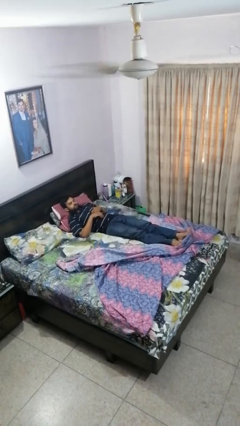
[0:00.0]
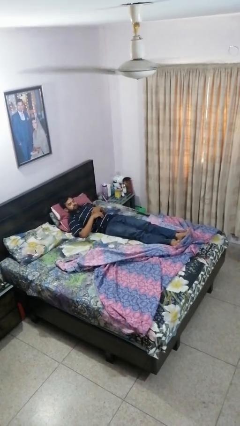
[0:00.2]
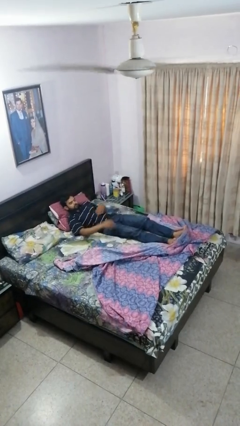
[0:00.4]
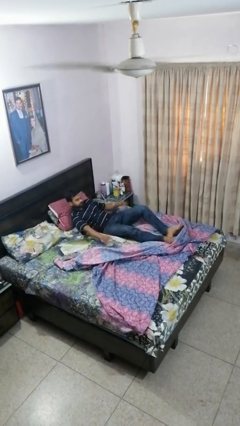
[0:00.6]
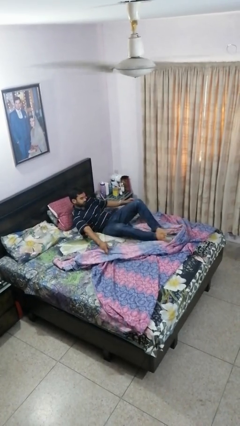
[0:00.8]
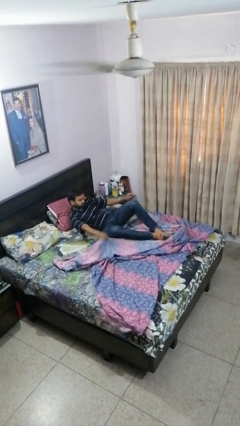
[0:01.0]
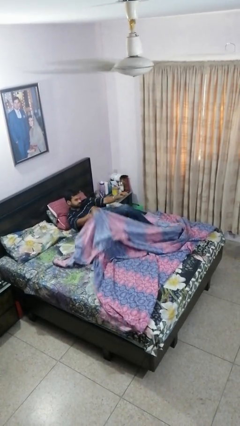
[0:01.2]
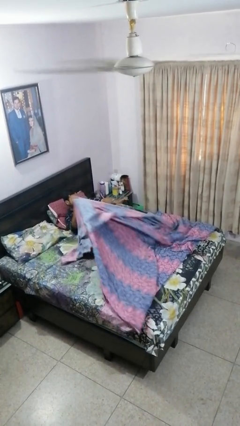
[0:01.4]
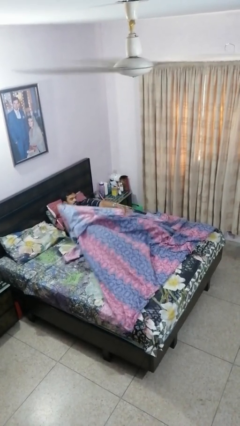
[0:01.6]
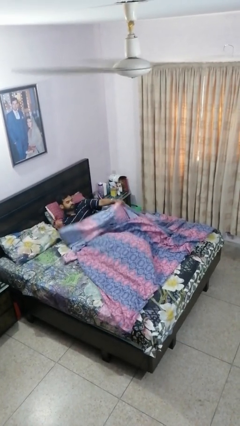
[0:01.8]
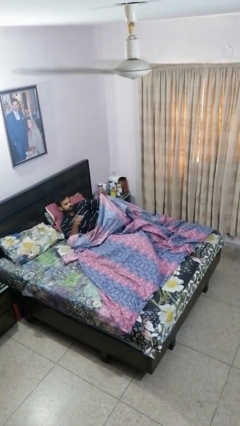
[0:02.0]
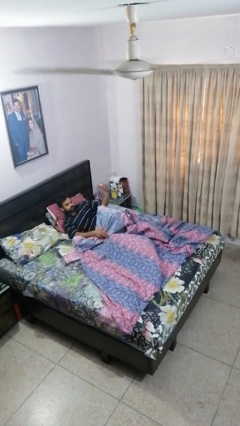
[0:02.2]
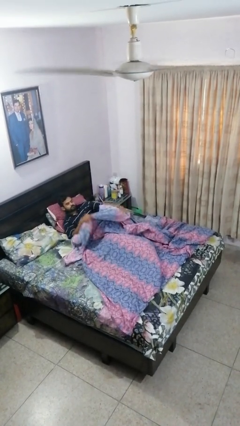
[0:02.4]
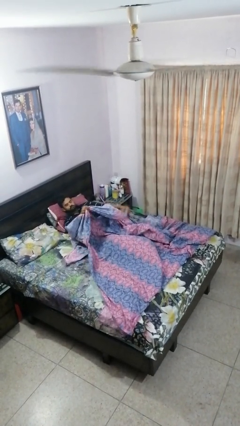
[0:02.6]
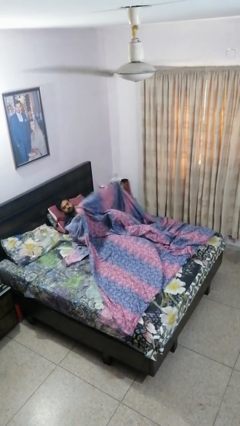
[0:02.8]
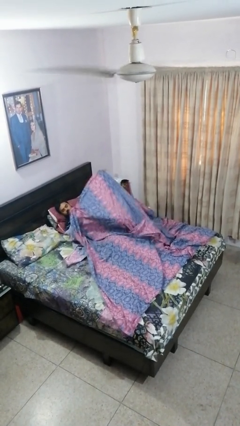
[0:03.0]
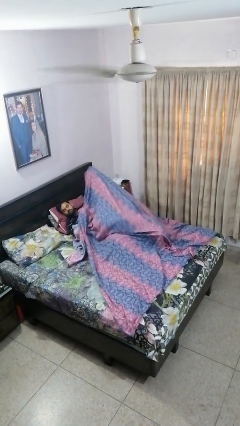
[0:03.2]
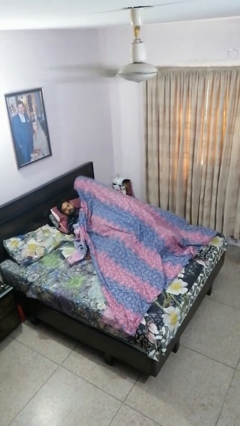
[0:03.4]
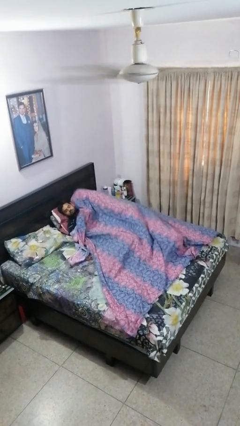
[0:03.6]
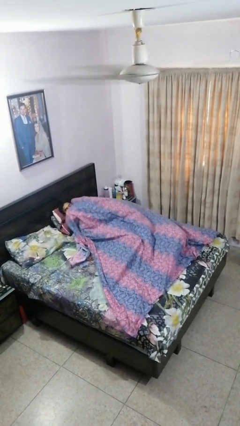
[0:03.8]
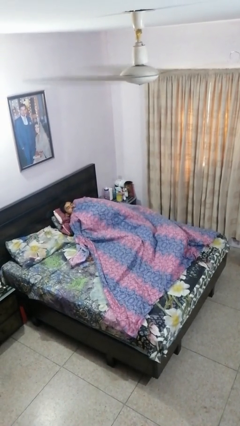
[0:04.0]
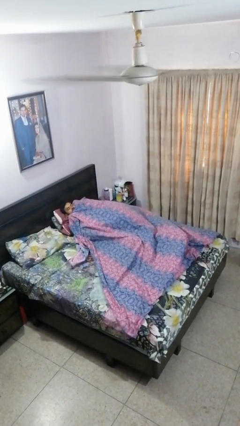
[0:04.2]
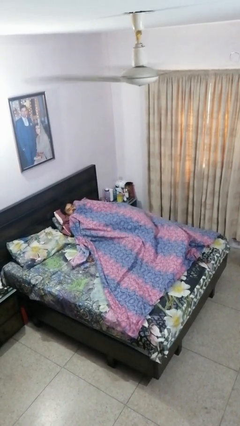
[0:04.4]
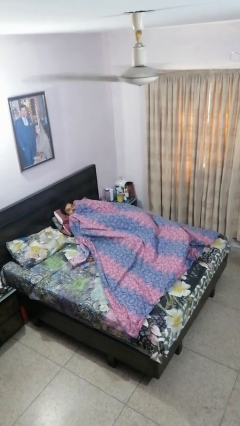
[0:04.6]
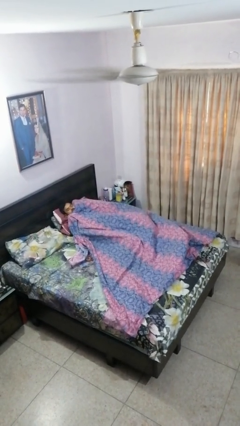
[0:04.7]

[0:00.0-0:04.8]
person covers with bedsheets

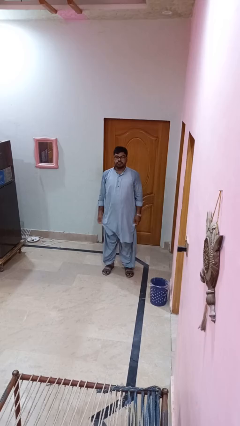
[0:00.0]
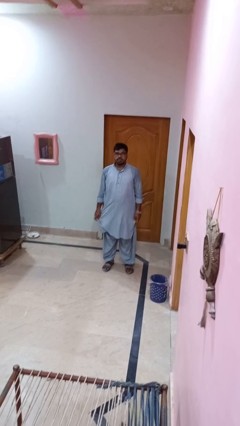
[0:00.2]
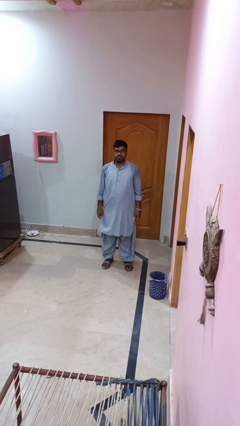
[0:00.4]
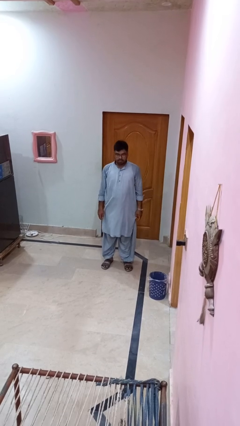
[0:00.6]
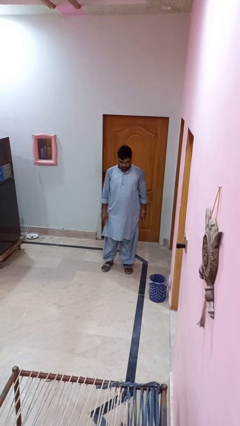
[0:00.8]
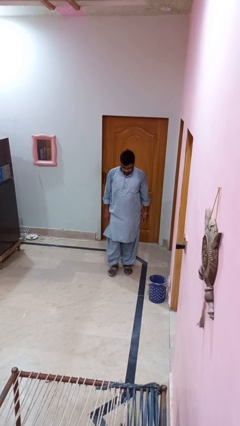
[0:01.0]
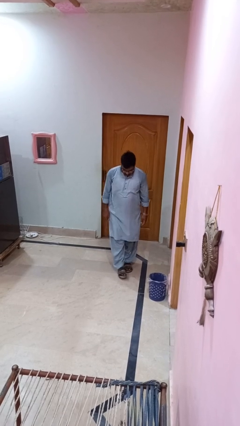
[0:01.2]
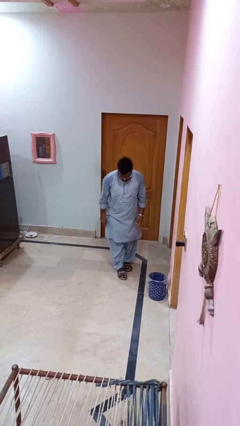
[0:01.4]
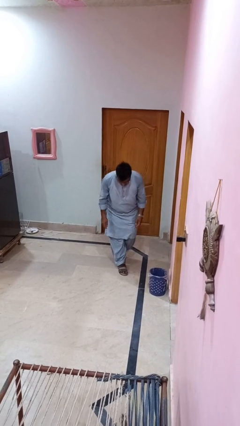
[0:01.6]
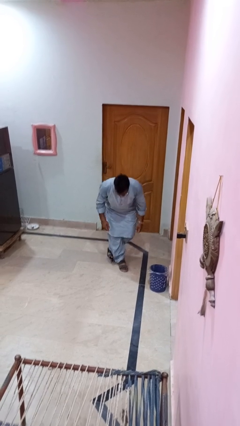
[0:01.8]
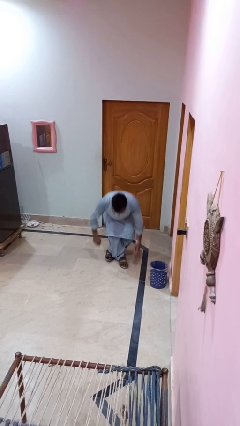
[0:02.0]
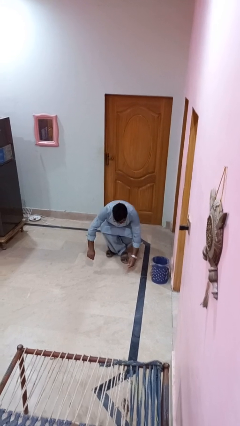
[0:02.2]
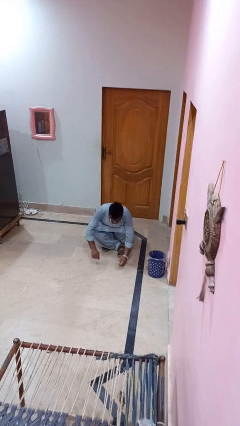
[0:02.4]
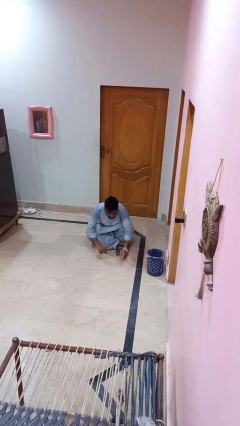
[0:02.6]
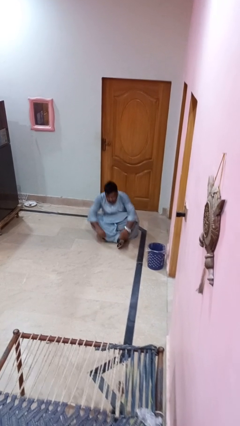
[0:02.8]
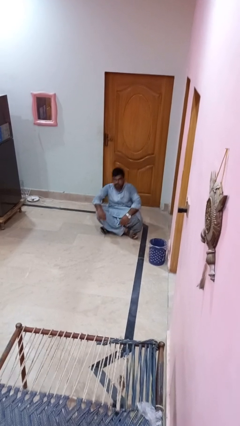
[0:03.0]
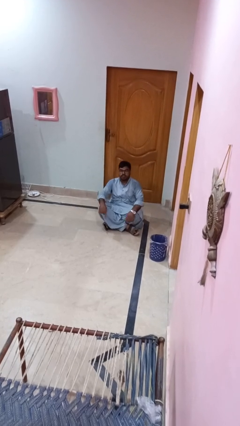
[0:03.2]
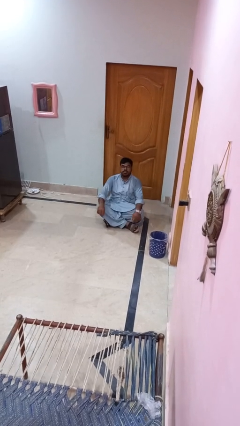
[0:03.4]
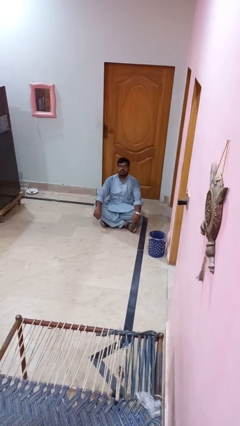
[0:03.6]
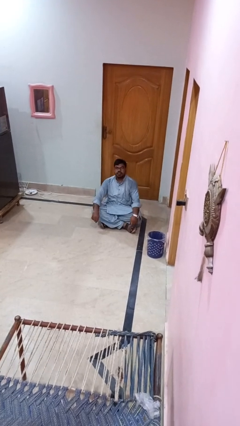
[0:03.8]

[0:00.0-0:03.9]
person sits crisscross

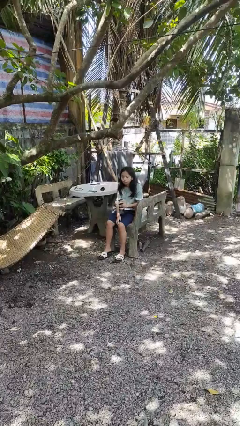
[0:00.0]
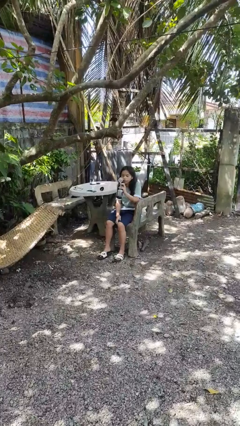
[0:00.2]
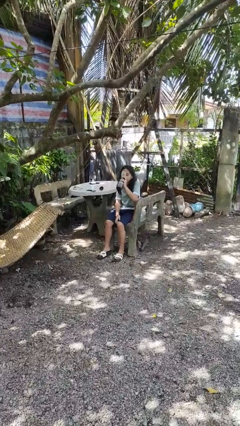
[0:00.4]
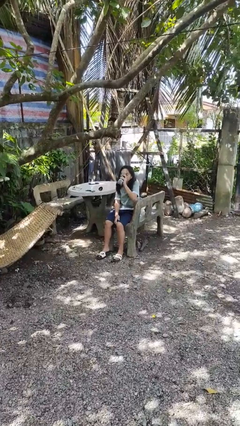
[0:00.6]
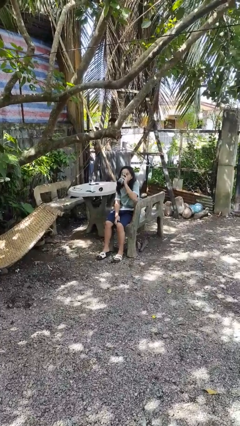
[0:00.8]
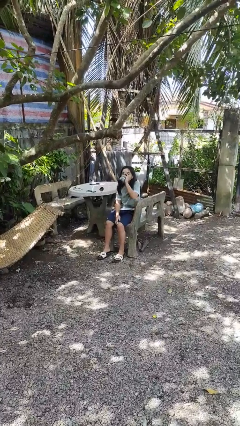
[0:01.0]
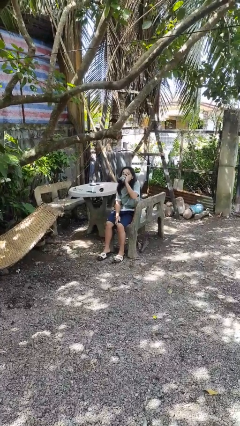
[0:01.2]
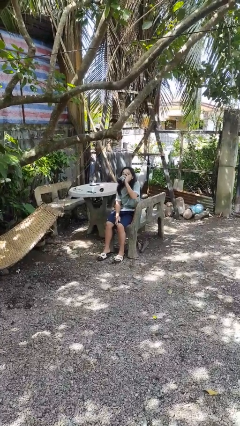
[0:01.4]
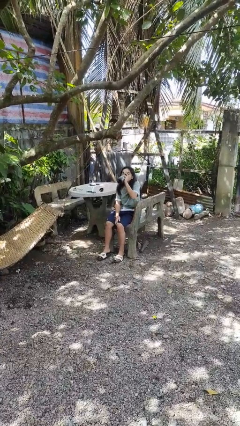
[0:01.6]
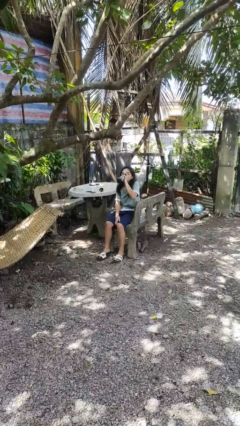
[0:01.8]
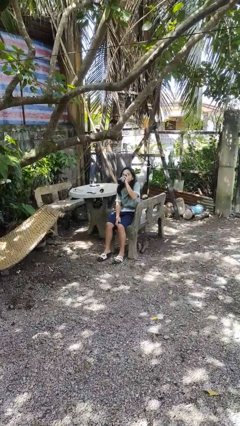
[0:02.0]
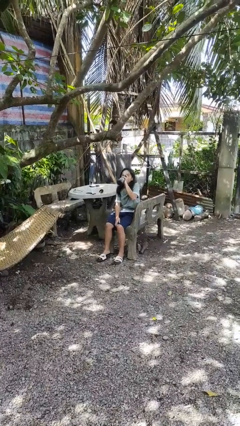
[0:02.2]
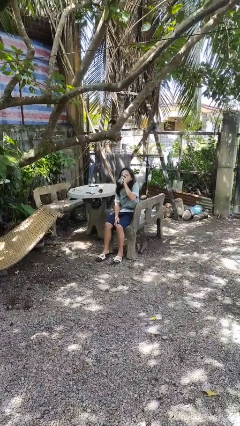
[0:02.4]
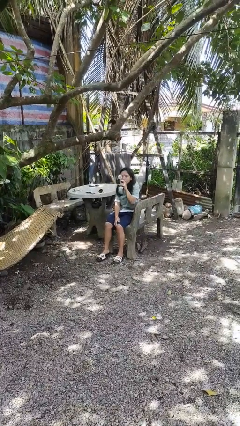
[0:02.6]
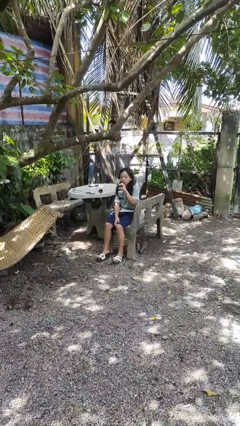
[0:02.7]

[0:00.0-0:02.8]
person drinks from bottle

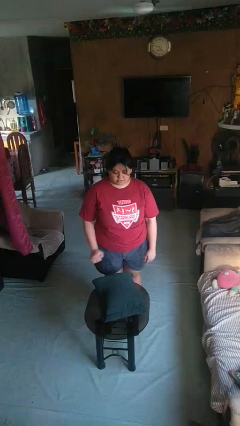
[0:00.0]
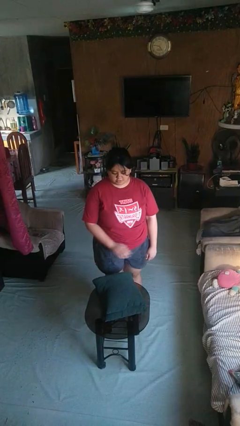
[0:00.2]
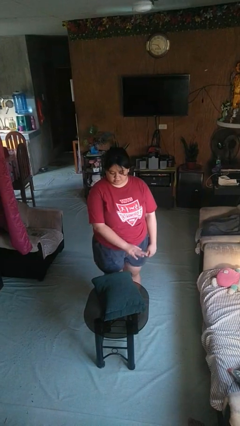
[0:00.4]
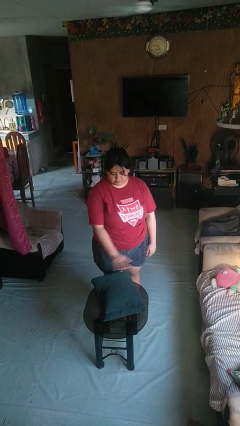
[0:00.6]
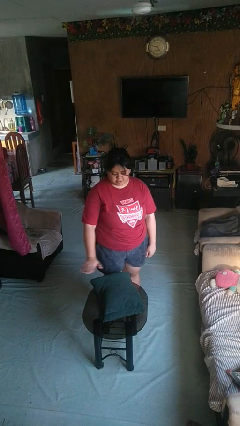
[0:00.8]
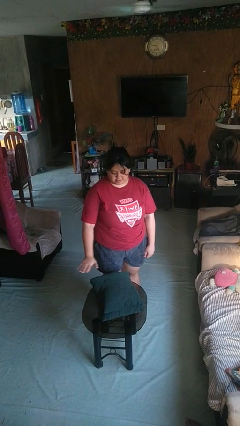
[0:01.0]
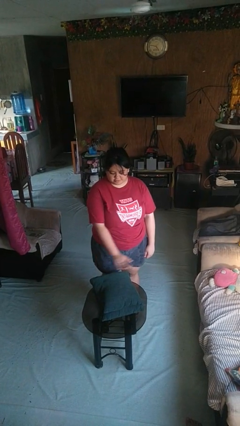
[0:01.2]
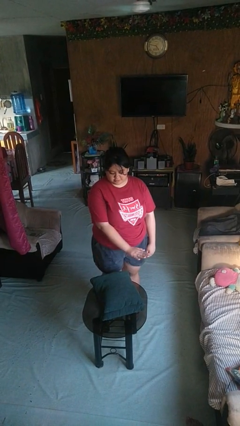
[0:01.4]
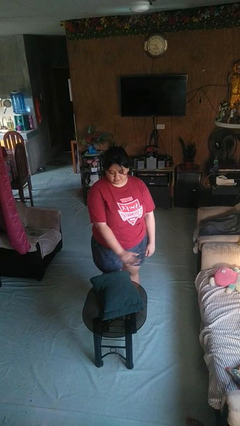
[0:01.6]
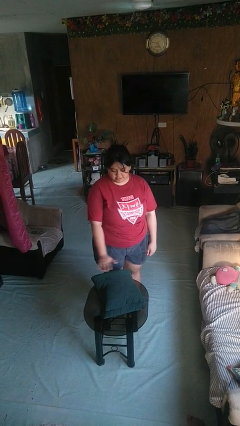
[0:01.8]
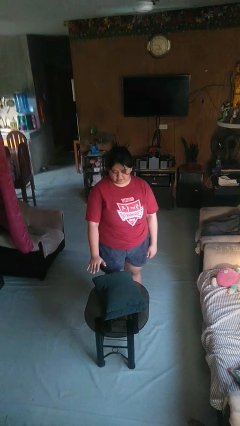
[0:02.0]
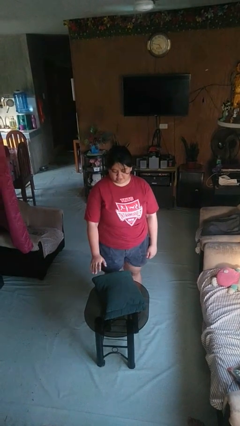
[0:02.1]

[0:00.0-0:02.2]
person waves hand over object

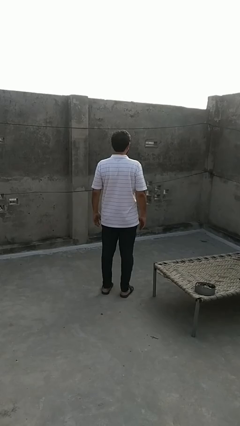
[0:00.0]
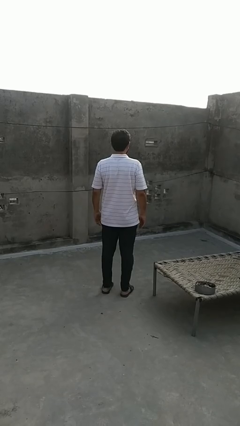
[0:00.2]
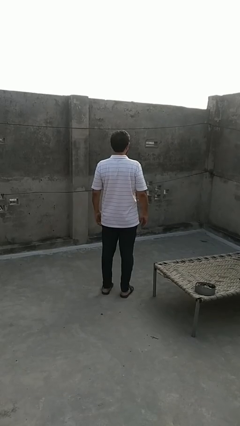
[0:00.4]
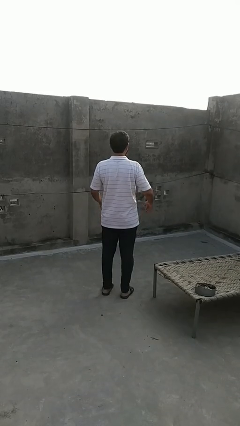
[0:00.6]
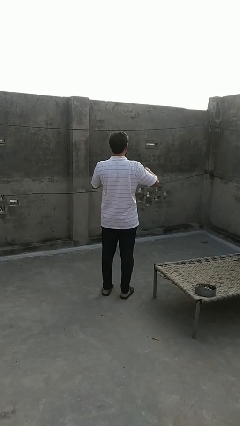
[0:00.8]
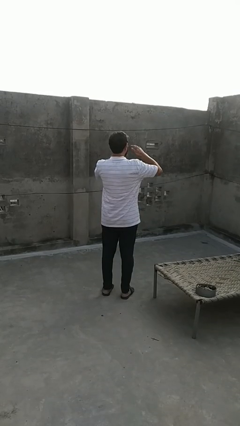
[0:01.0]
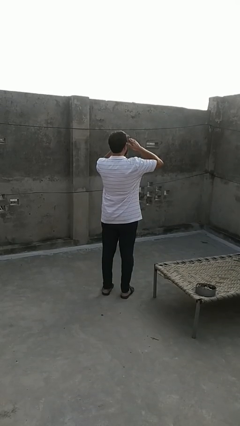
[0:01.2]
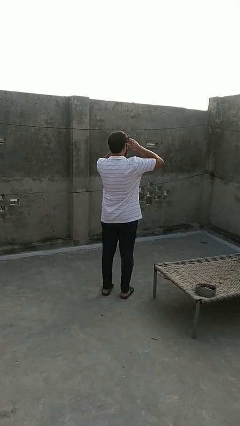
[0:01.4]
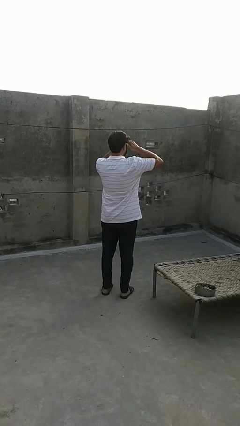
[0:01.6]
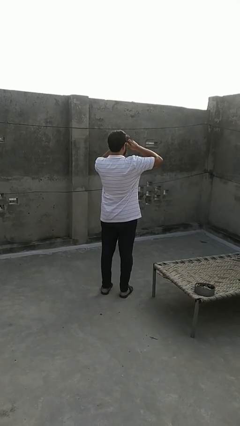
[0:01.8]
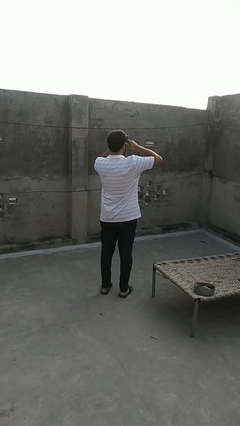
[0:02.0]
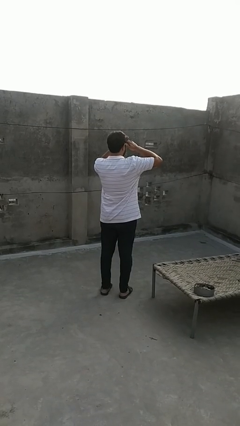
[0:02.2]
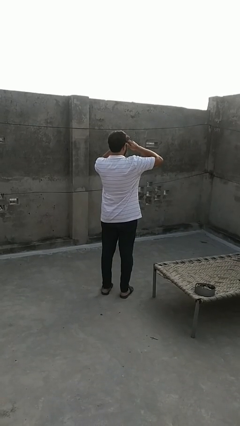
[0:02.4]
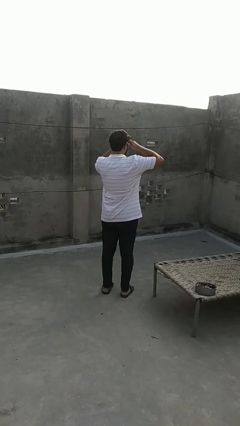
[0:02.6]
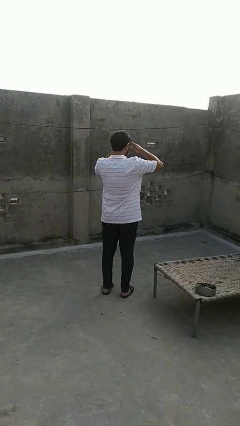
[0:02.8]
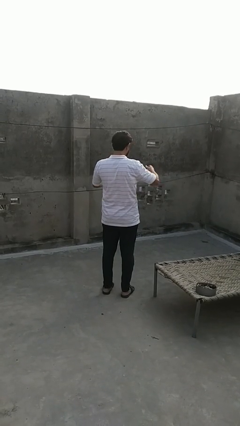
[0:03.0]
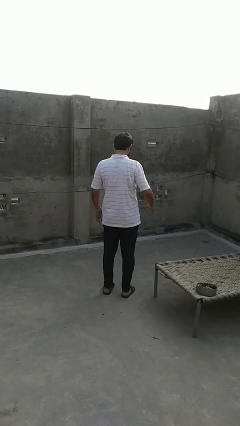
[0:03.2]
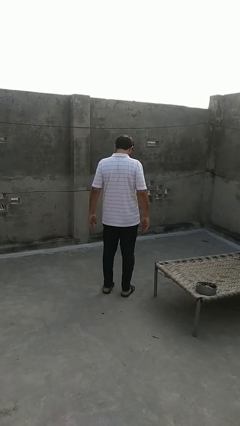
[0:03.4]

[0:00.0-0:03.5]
person shades eyes

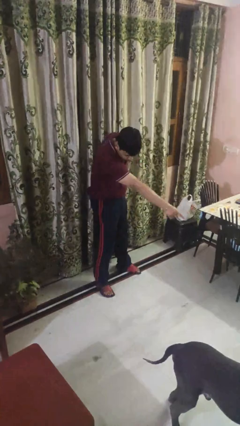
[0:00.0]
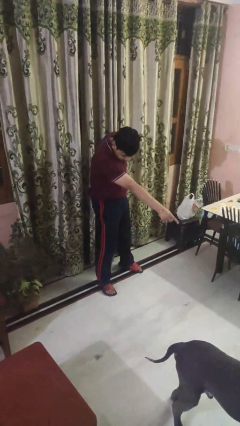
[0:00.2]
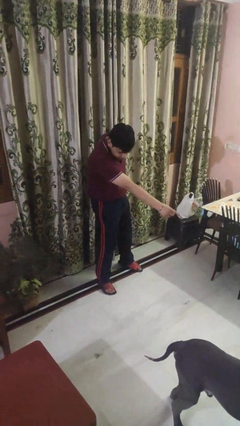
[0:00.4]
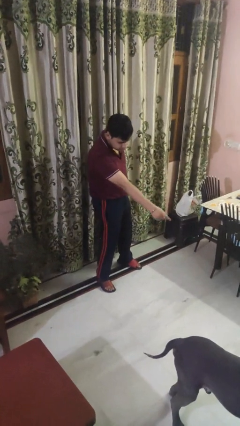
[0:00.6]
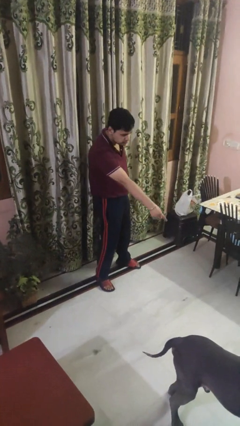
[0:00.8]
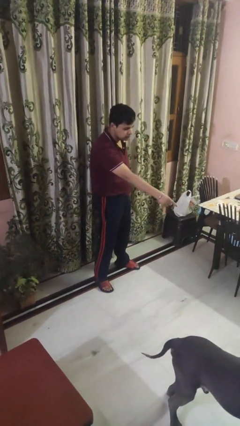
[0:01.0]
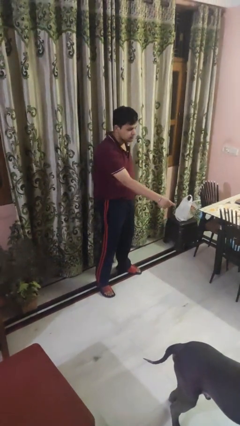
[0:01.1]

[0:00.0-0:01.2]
person points to dog
